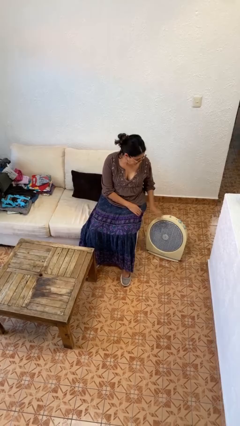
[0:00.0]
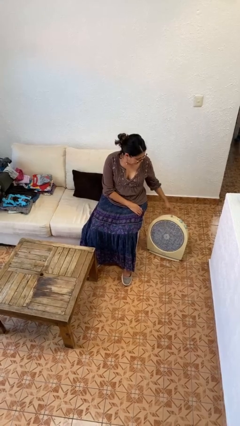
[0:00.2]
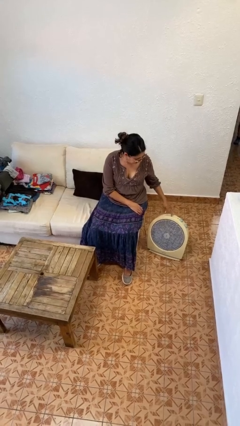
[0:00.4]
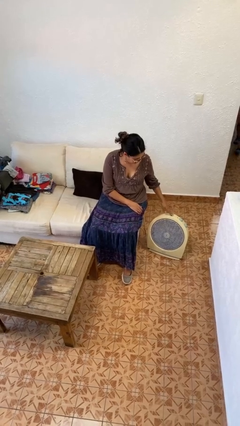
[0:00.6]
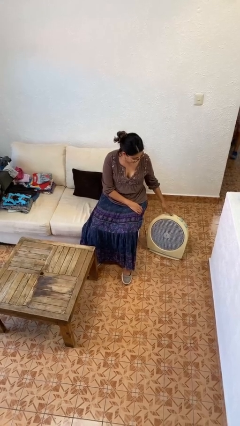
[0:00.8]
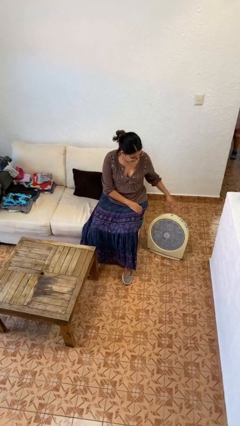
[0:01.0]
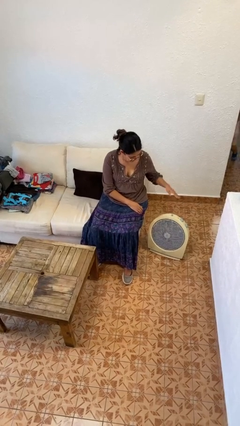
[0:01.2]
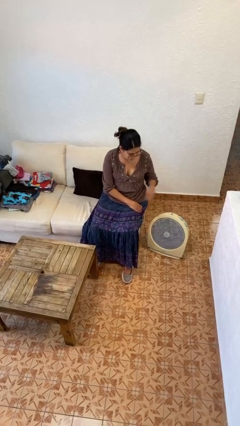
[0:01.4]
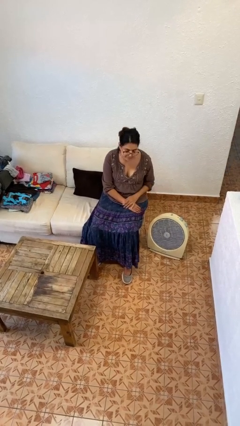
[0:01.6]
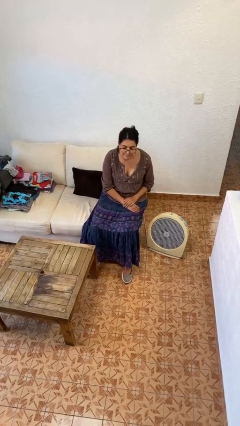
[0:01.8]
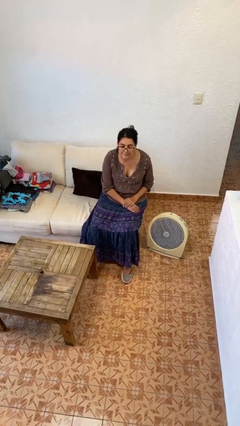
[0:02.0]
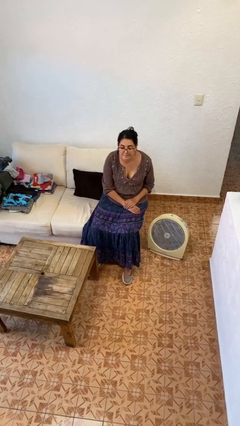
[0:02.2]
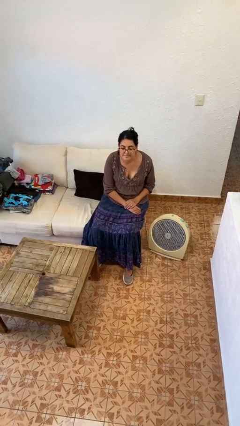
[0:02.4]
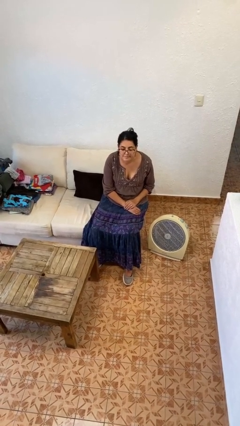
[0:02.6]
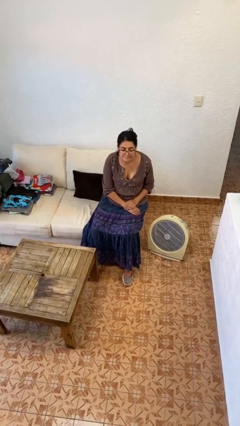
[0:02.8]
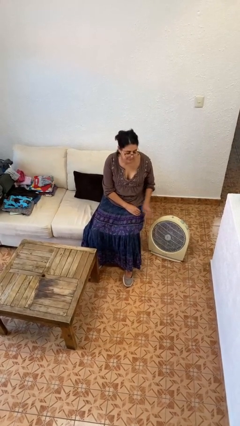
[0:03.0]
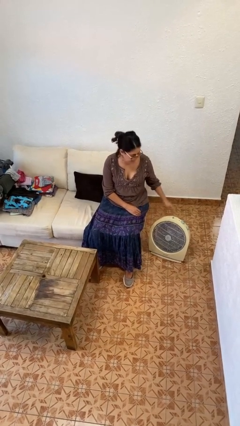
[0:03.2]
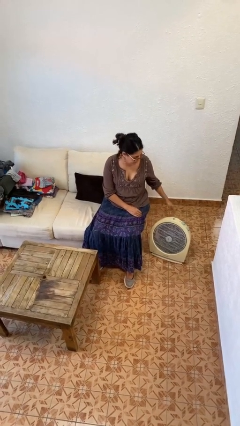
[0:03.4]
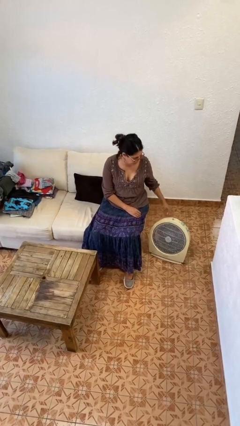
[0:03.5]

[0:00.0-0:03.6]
person turns on fan

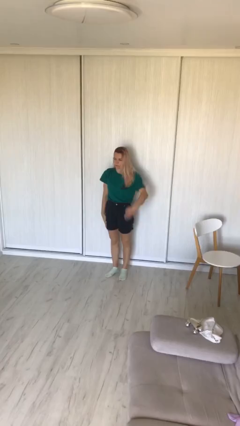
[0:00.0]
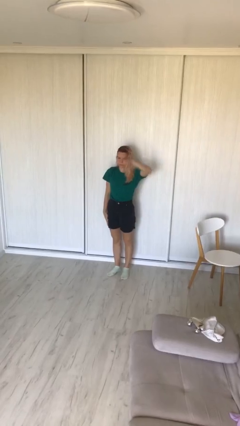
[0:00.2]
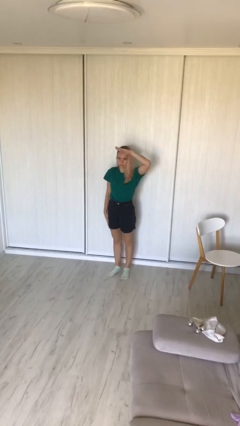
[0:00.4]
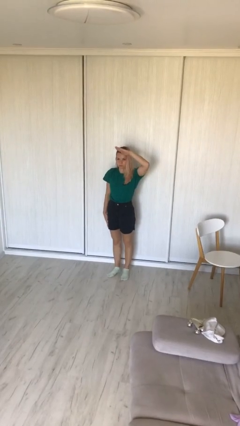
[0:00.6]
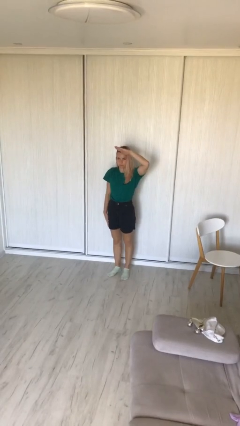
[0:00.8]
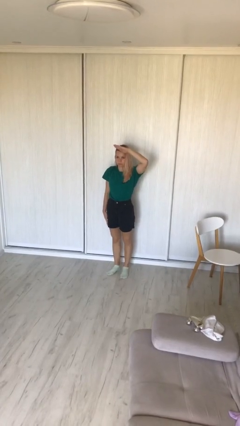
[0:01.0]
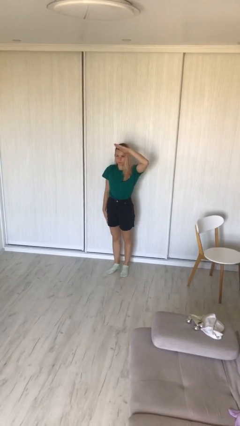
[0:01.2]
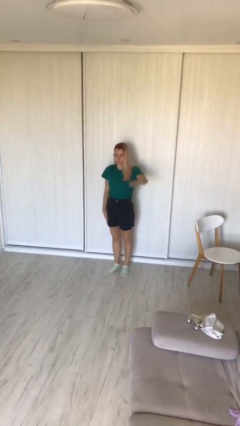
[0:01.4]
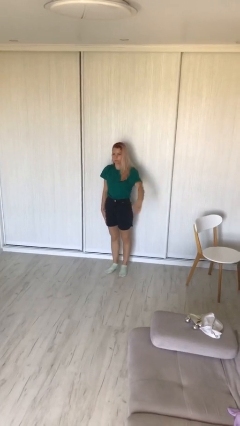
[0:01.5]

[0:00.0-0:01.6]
person salutes

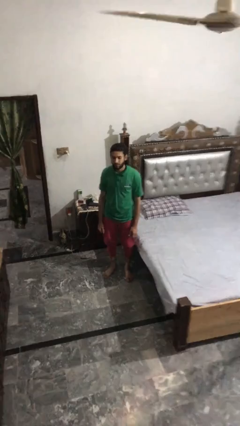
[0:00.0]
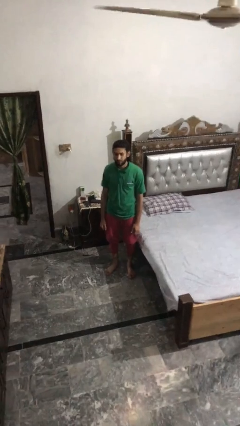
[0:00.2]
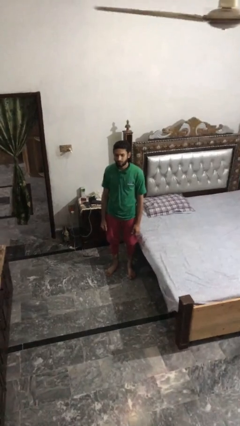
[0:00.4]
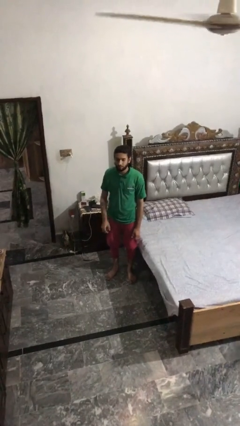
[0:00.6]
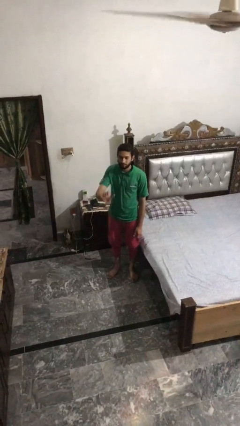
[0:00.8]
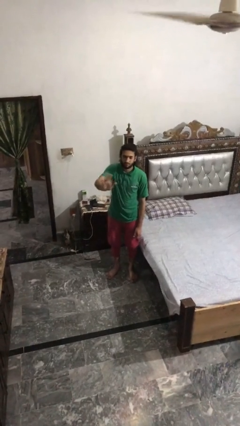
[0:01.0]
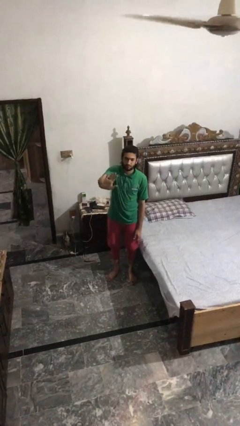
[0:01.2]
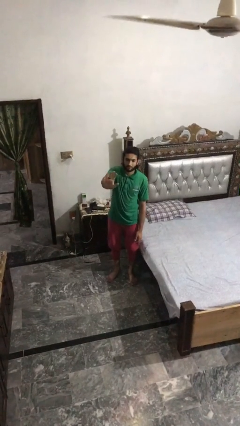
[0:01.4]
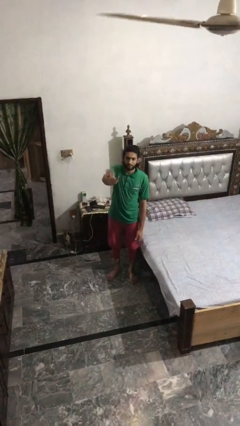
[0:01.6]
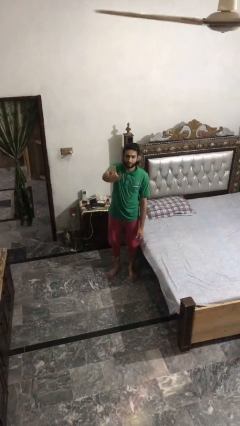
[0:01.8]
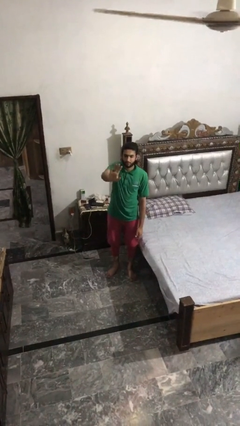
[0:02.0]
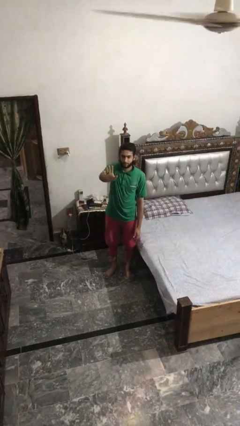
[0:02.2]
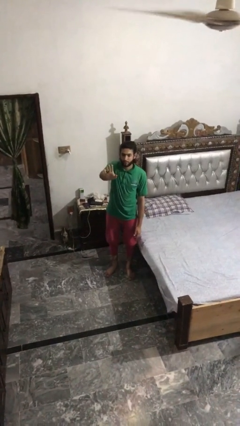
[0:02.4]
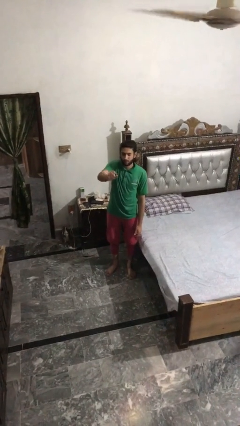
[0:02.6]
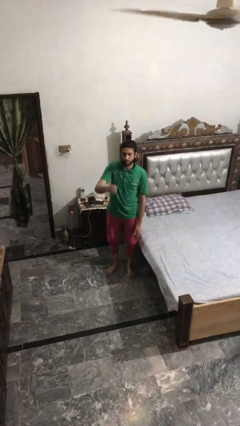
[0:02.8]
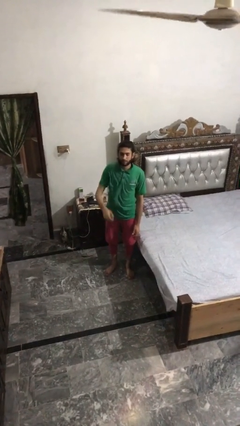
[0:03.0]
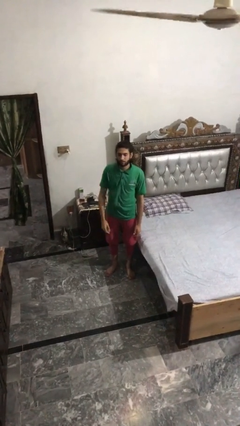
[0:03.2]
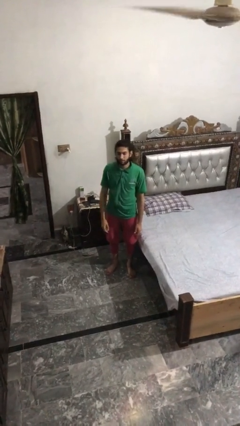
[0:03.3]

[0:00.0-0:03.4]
person waves at person

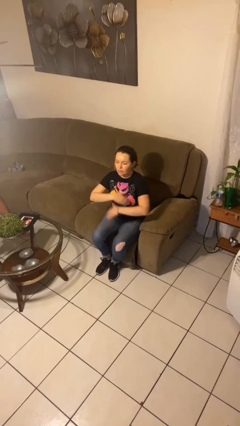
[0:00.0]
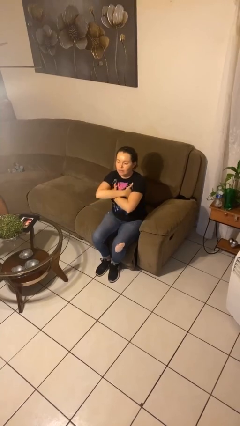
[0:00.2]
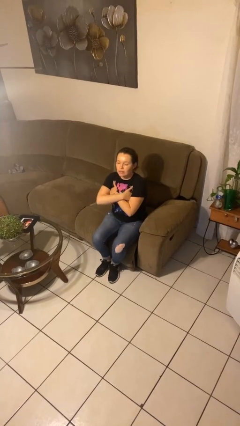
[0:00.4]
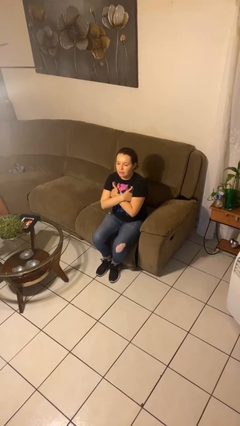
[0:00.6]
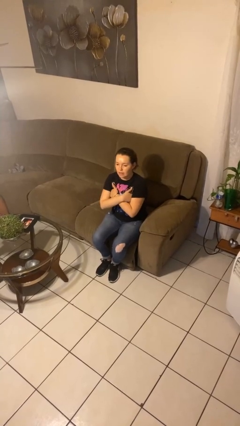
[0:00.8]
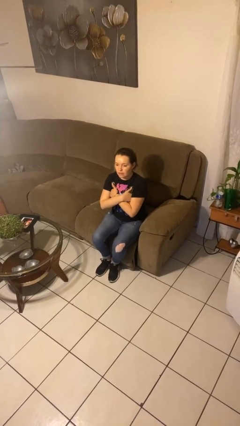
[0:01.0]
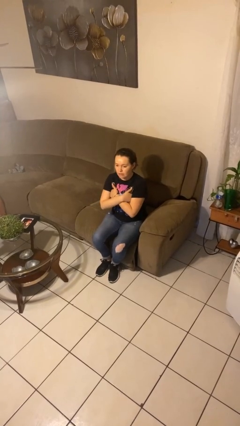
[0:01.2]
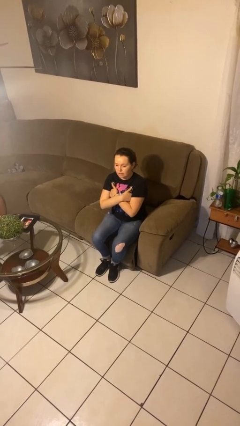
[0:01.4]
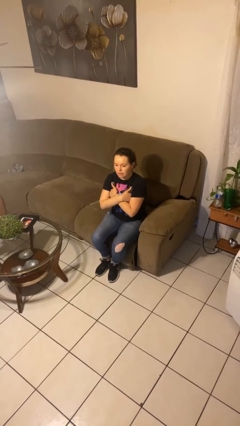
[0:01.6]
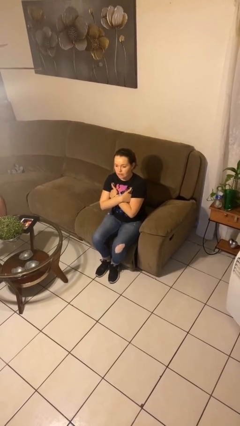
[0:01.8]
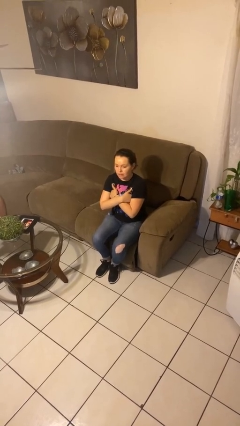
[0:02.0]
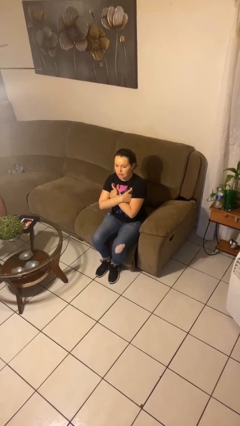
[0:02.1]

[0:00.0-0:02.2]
person gestures arms x

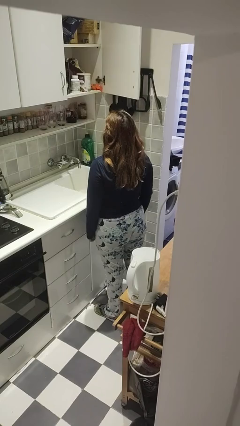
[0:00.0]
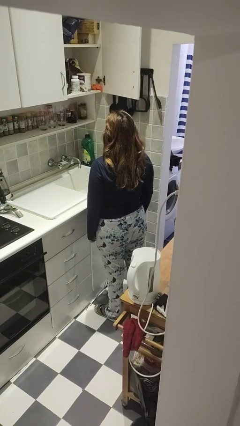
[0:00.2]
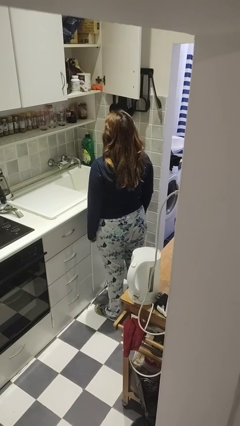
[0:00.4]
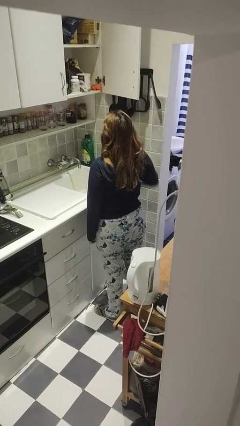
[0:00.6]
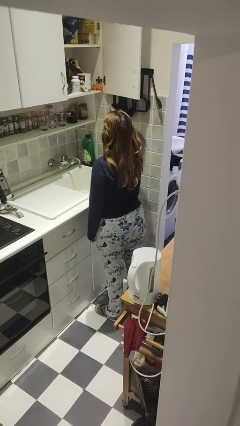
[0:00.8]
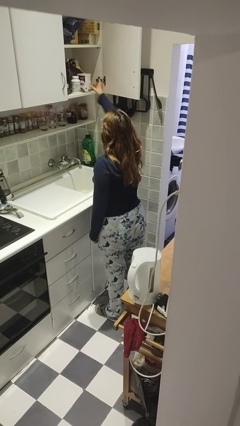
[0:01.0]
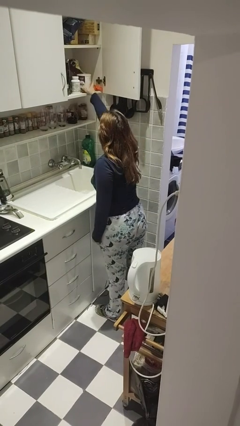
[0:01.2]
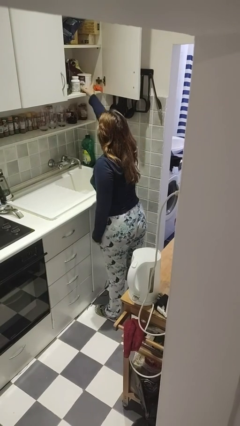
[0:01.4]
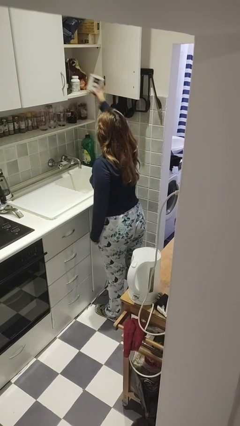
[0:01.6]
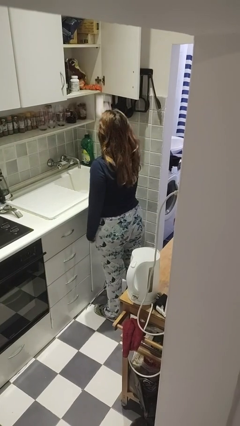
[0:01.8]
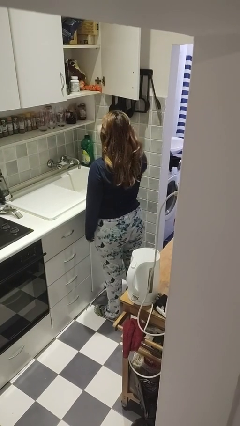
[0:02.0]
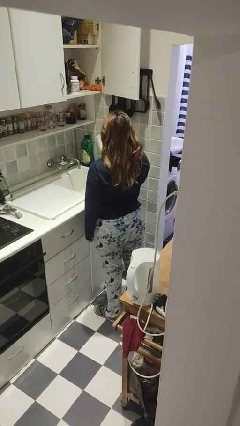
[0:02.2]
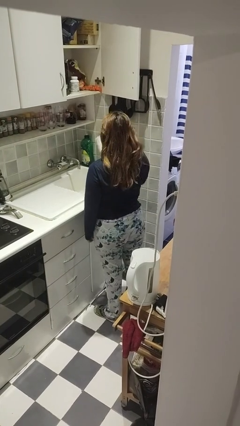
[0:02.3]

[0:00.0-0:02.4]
person takes object from cabinet

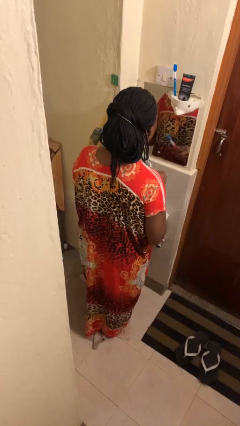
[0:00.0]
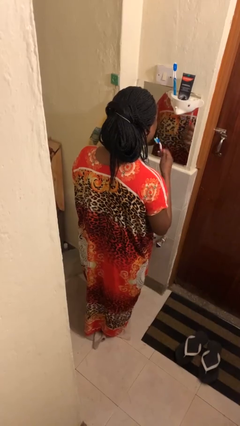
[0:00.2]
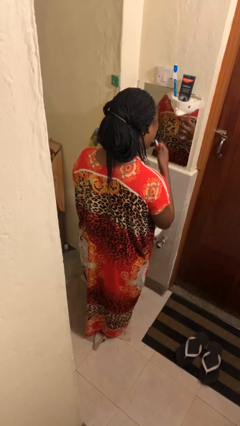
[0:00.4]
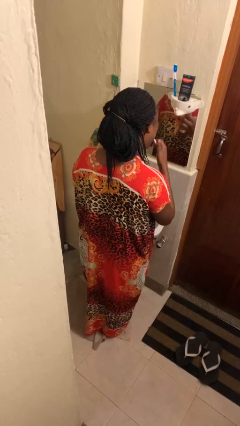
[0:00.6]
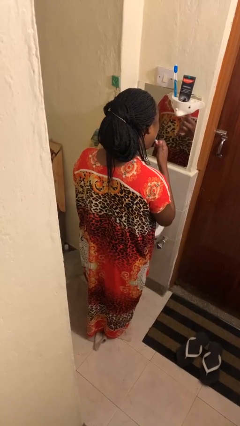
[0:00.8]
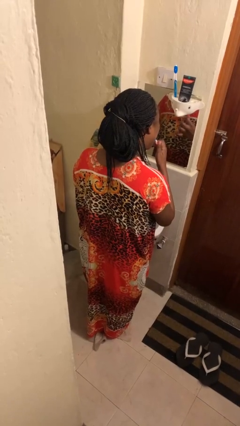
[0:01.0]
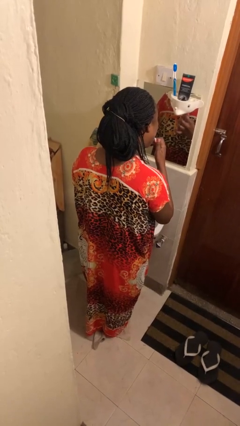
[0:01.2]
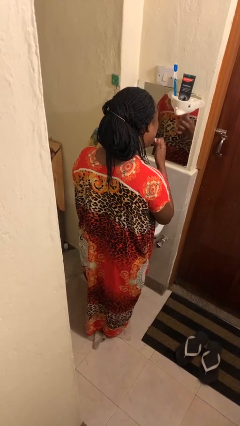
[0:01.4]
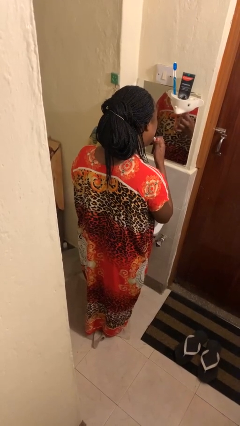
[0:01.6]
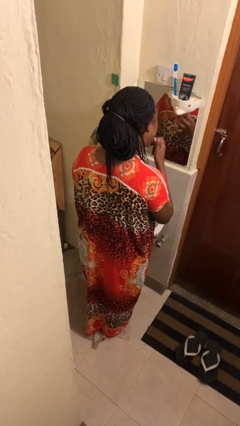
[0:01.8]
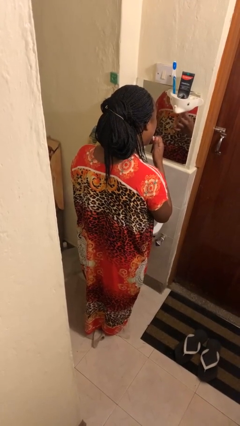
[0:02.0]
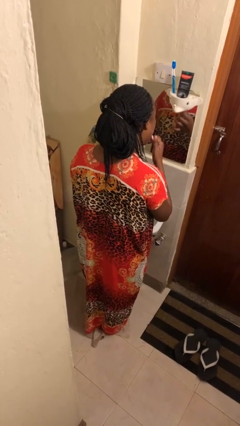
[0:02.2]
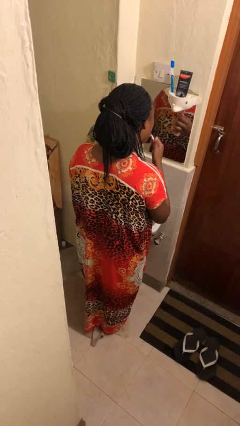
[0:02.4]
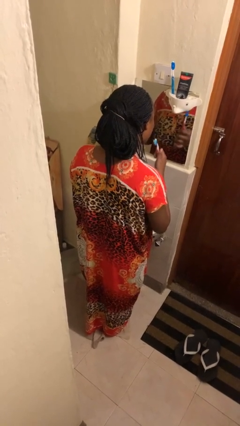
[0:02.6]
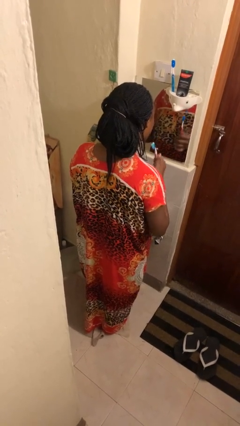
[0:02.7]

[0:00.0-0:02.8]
person brushes teeth

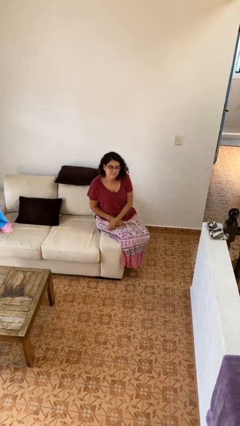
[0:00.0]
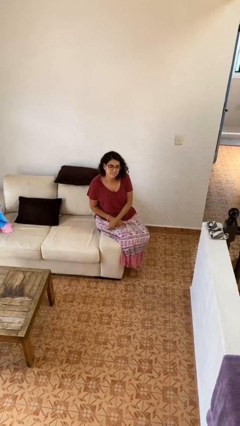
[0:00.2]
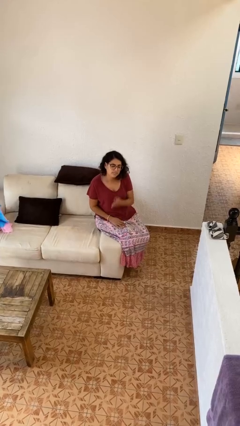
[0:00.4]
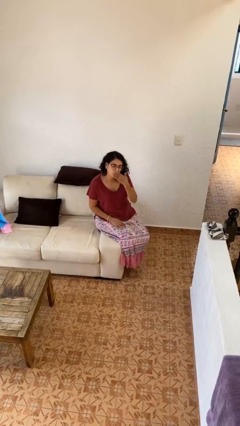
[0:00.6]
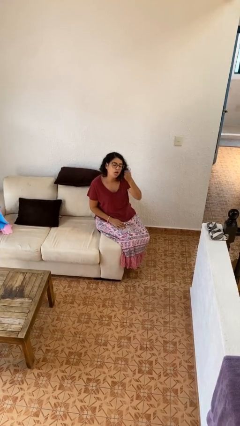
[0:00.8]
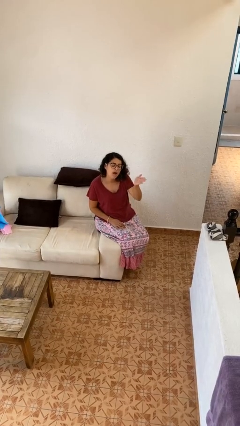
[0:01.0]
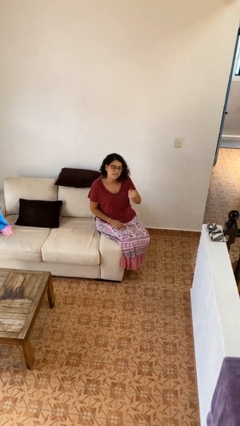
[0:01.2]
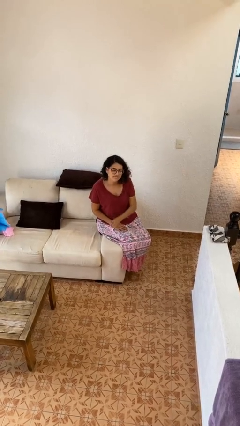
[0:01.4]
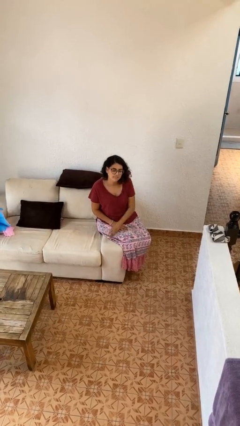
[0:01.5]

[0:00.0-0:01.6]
person gestures blow kiss
